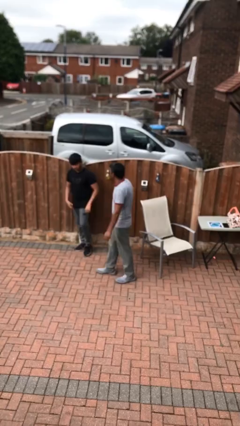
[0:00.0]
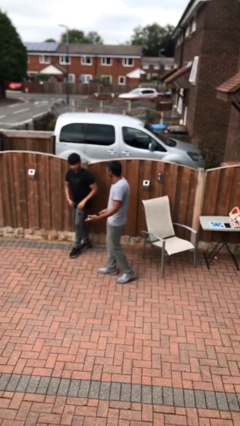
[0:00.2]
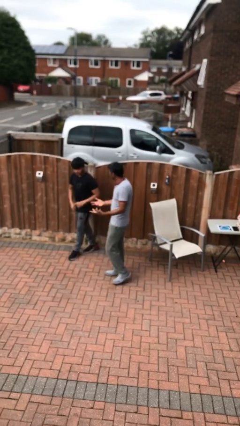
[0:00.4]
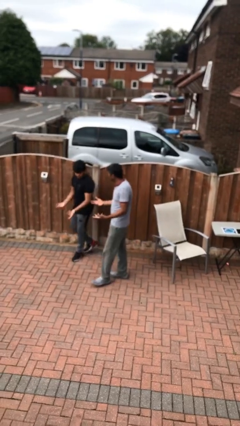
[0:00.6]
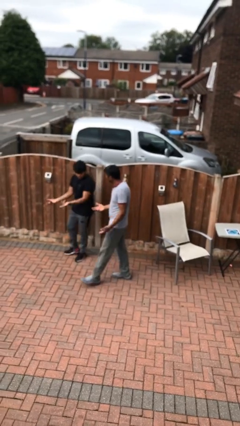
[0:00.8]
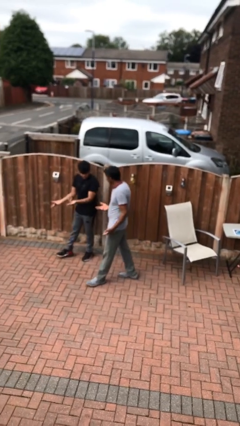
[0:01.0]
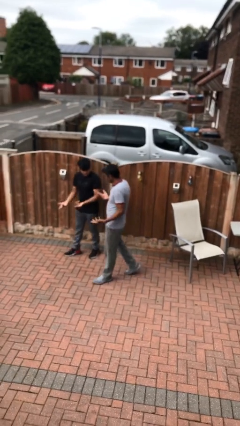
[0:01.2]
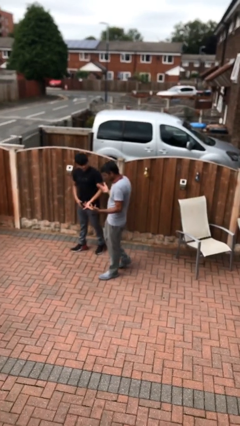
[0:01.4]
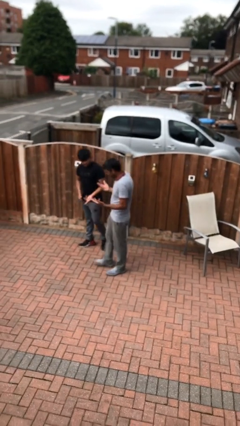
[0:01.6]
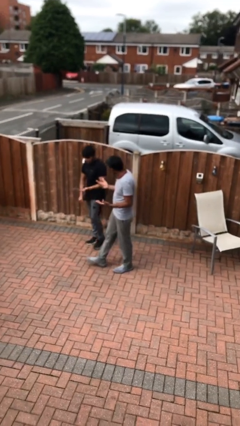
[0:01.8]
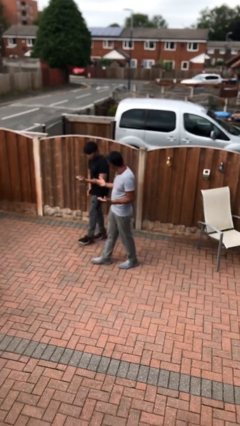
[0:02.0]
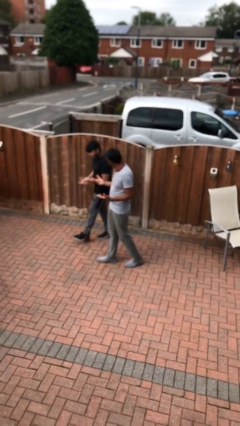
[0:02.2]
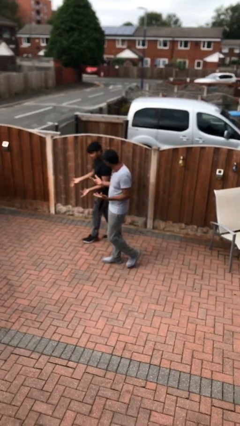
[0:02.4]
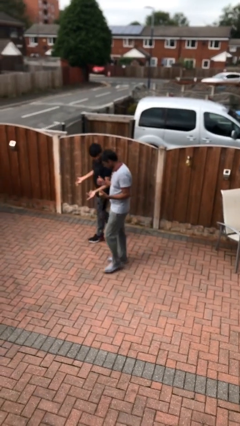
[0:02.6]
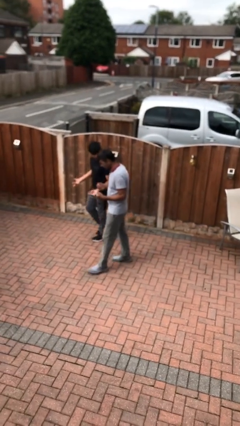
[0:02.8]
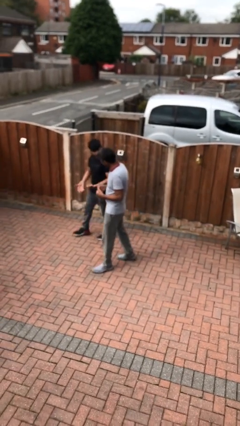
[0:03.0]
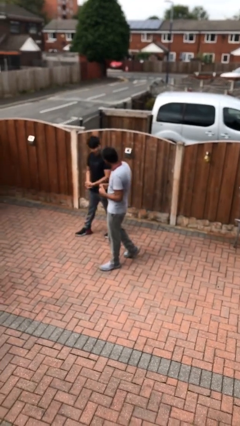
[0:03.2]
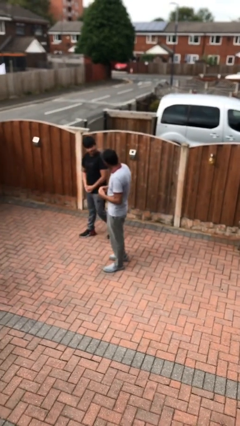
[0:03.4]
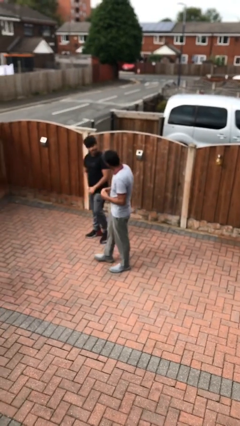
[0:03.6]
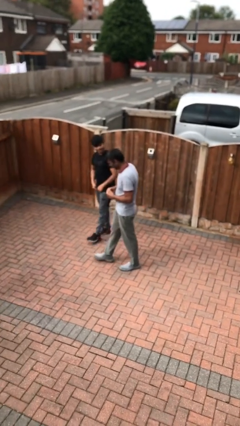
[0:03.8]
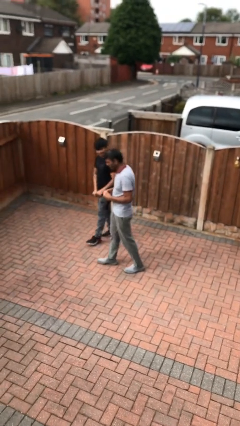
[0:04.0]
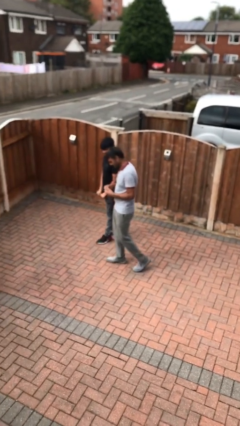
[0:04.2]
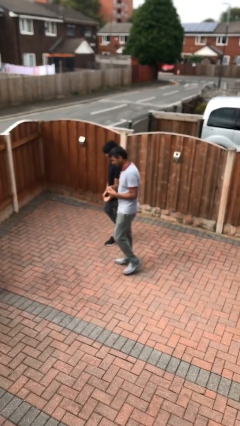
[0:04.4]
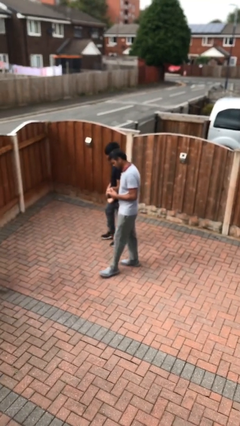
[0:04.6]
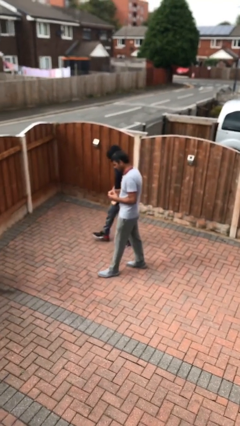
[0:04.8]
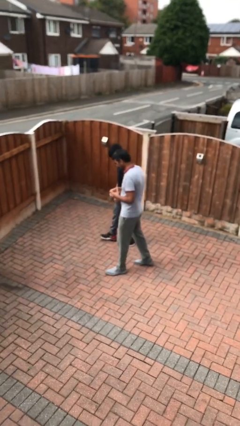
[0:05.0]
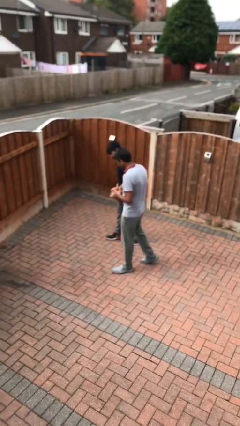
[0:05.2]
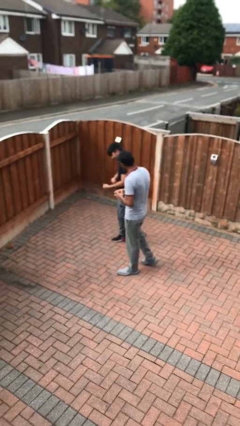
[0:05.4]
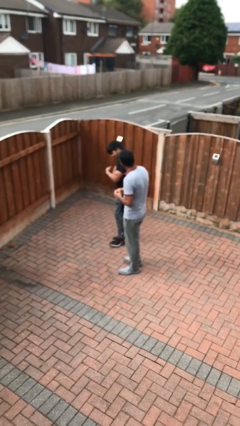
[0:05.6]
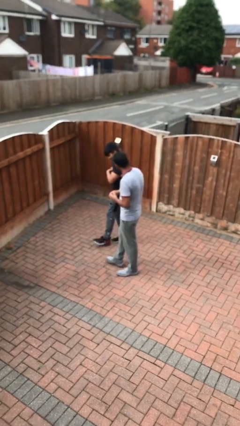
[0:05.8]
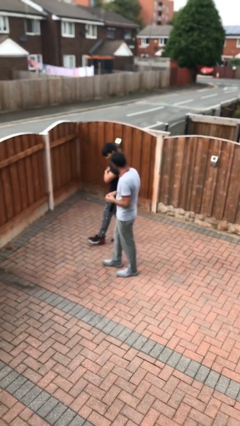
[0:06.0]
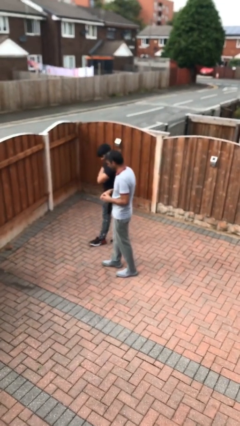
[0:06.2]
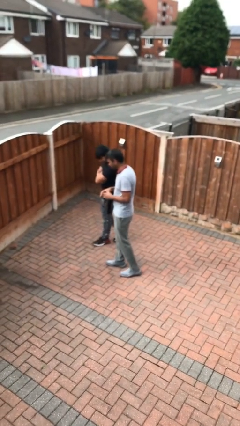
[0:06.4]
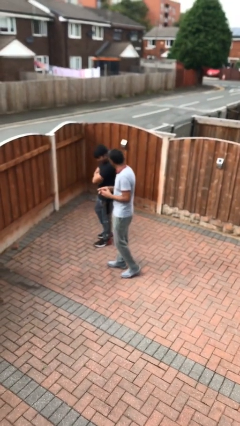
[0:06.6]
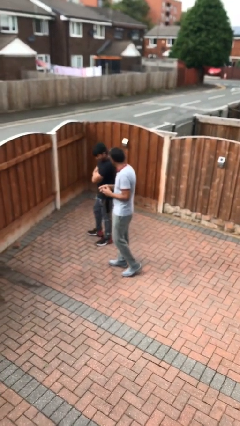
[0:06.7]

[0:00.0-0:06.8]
person talks to person

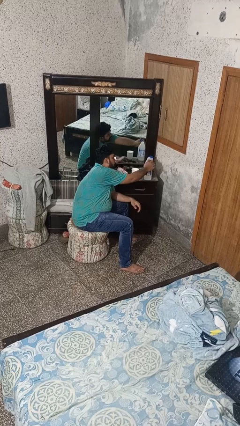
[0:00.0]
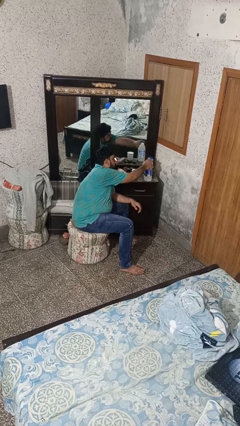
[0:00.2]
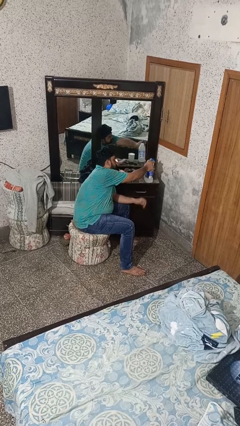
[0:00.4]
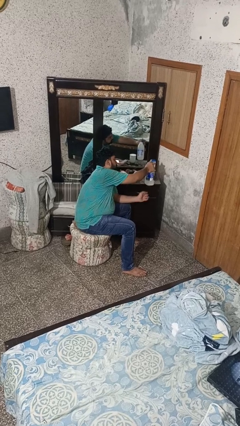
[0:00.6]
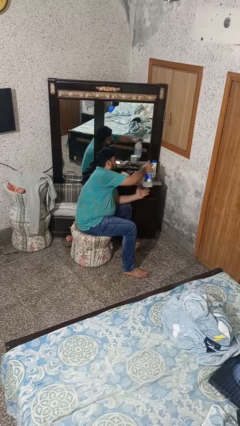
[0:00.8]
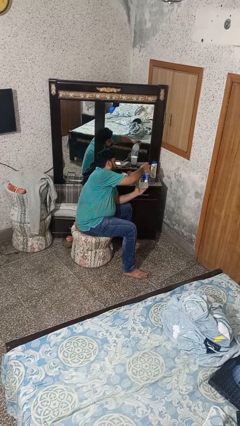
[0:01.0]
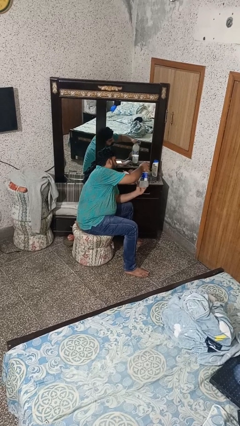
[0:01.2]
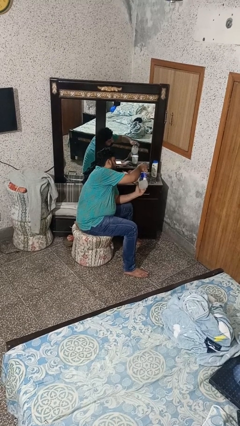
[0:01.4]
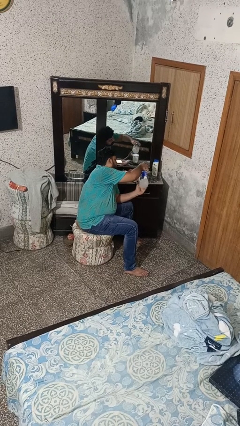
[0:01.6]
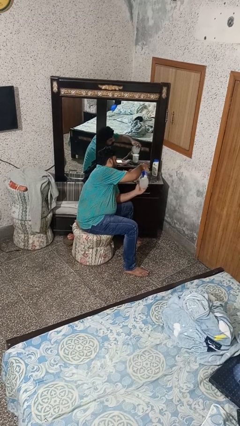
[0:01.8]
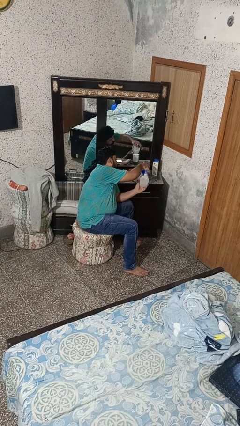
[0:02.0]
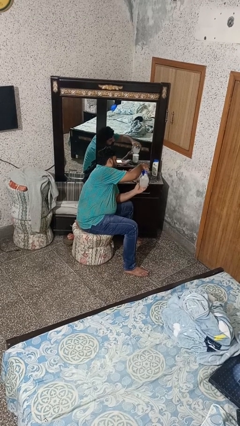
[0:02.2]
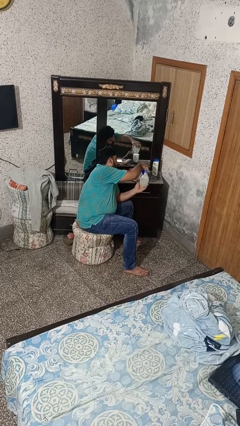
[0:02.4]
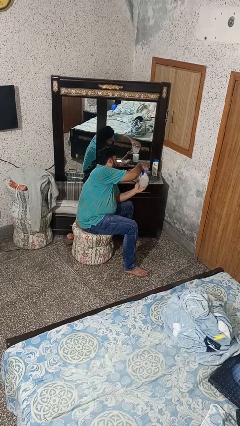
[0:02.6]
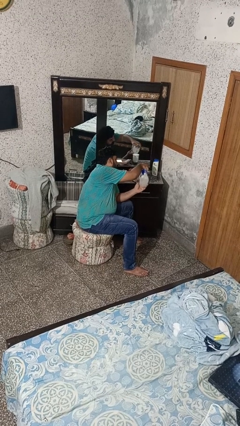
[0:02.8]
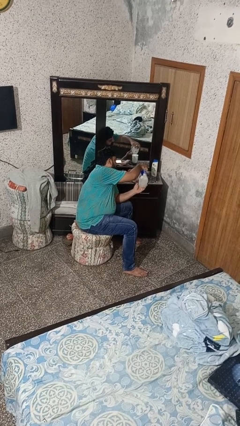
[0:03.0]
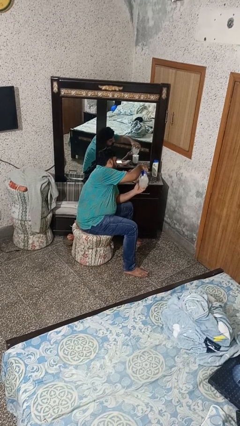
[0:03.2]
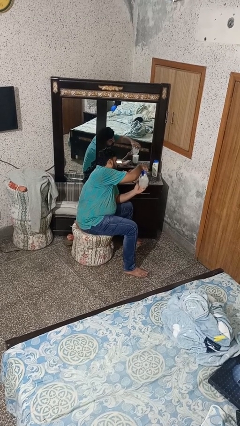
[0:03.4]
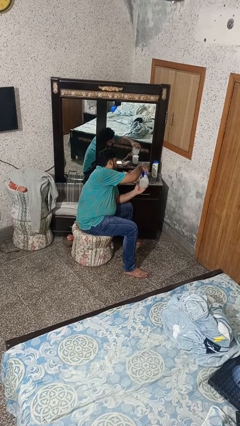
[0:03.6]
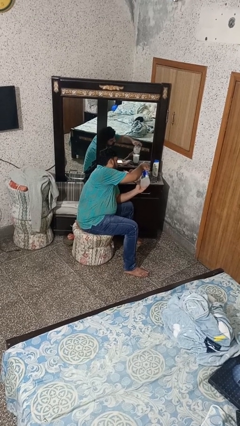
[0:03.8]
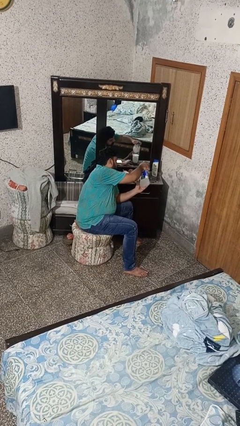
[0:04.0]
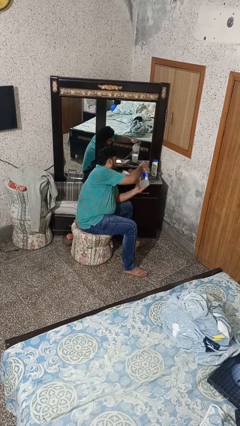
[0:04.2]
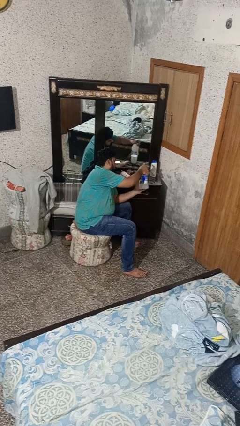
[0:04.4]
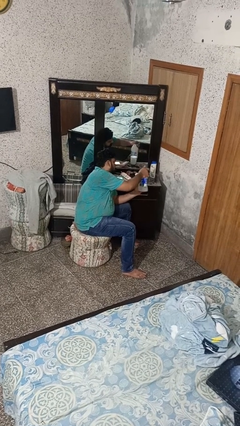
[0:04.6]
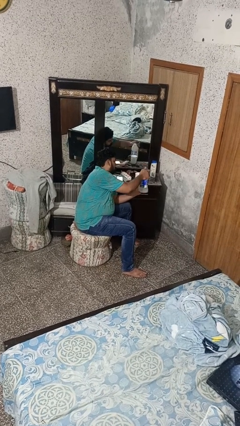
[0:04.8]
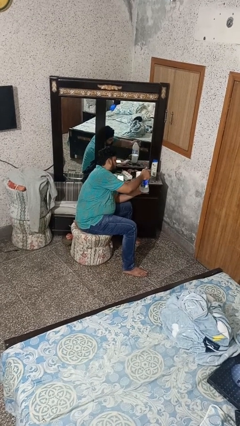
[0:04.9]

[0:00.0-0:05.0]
person pours liquid into cup

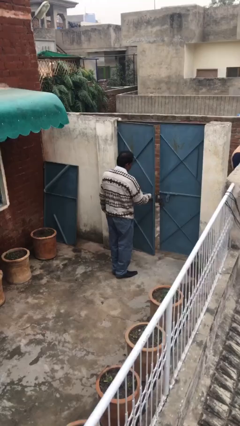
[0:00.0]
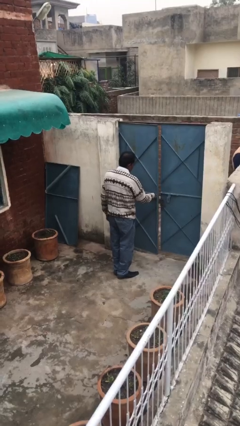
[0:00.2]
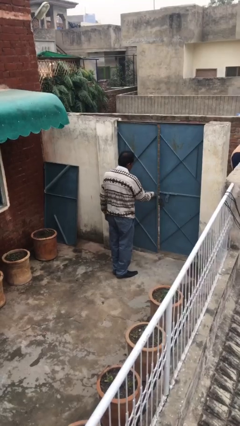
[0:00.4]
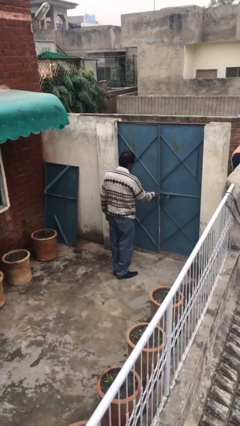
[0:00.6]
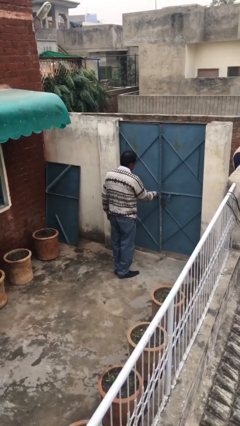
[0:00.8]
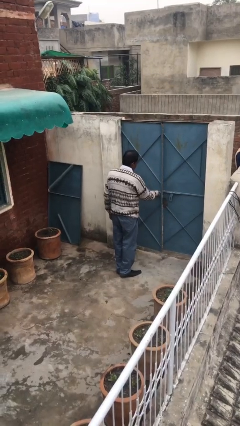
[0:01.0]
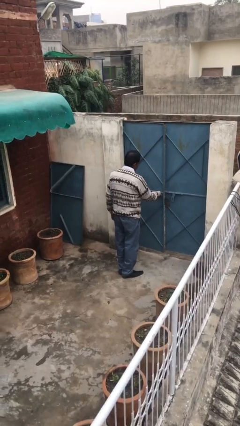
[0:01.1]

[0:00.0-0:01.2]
person closes facility door

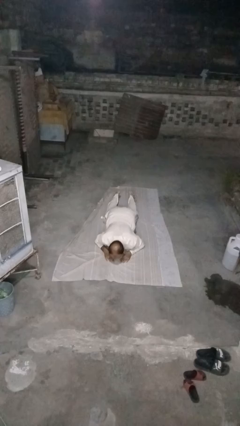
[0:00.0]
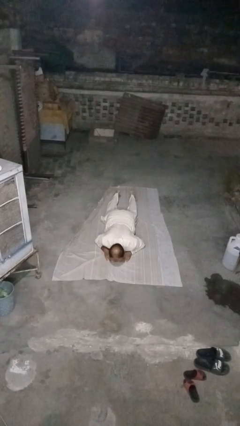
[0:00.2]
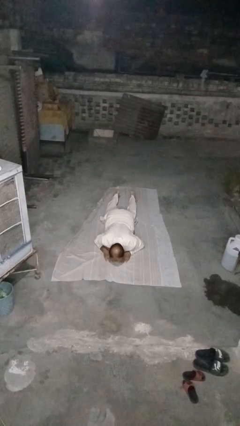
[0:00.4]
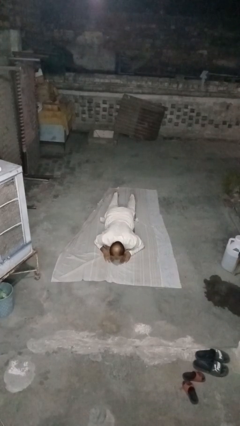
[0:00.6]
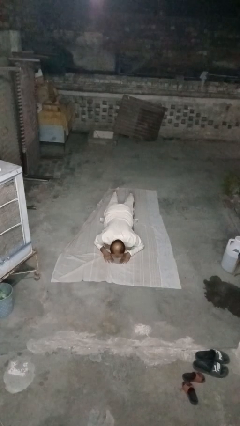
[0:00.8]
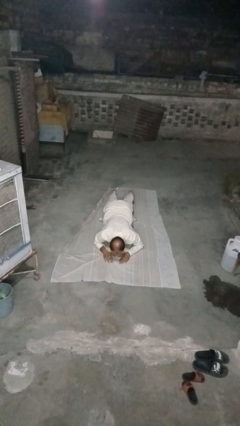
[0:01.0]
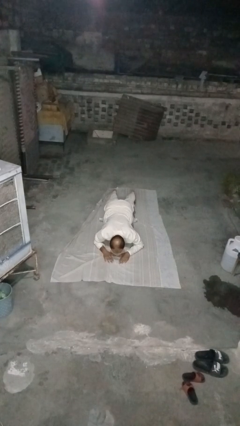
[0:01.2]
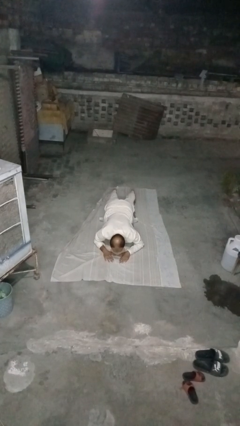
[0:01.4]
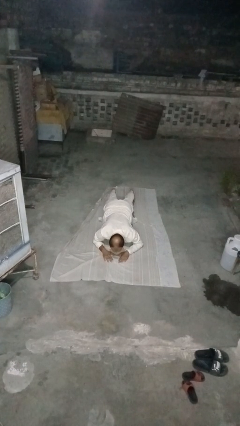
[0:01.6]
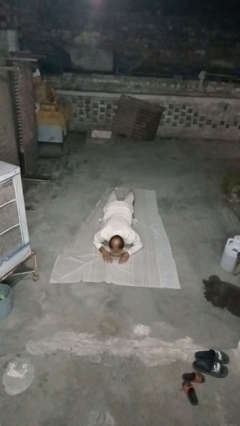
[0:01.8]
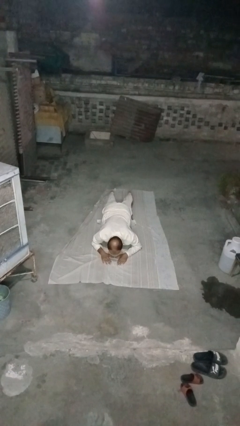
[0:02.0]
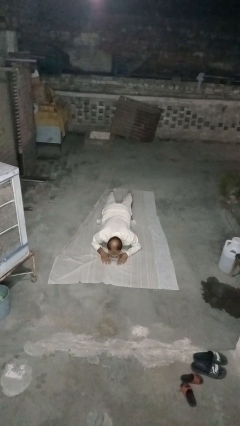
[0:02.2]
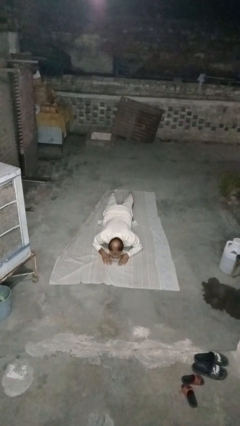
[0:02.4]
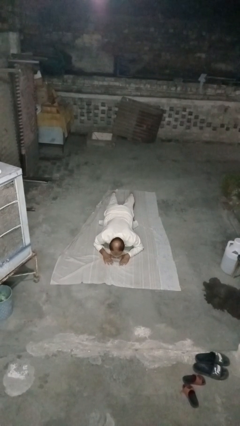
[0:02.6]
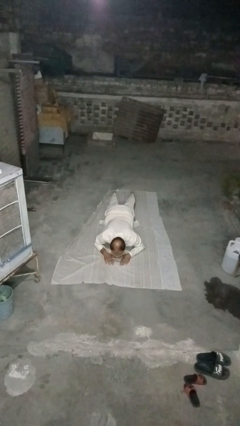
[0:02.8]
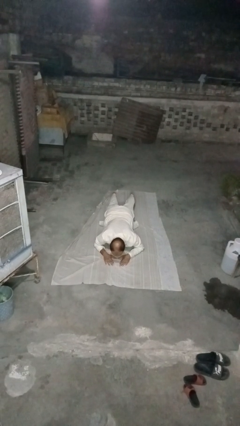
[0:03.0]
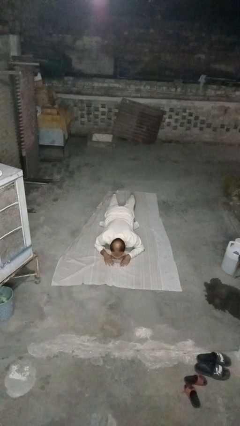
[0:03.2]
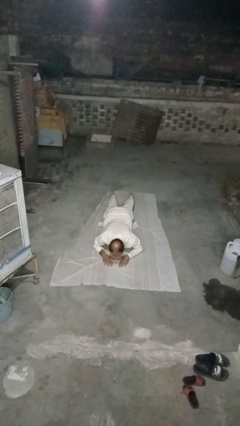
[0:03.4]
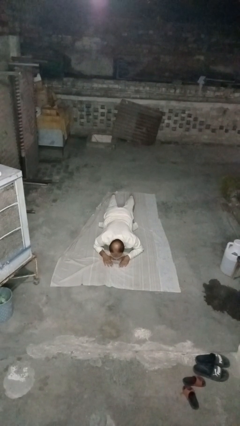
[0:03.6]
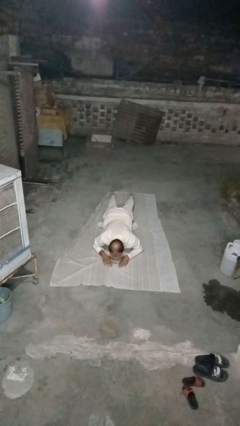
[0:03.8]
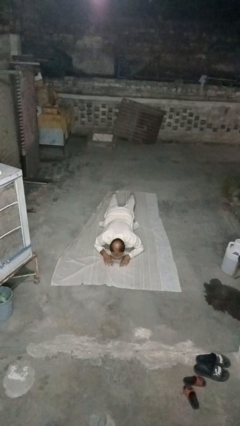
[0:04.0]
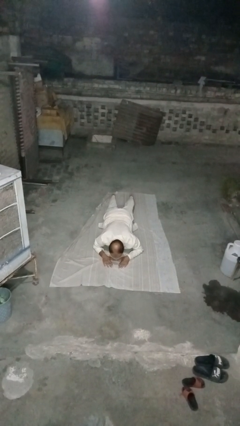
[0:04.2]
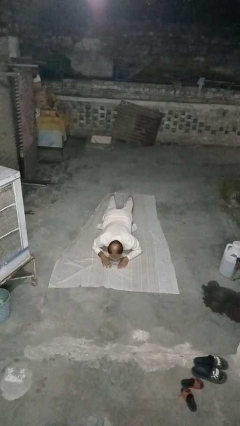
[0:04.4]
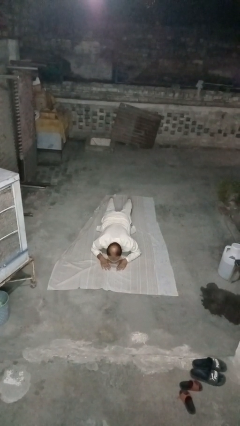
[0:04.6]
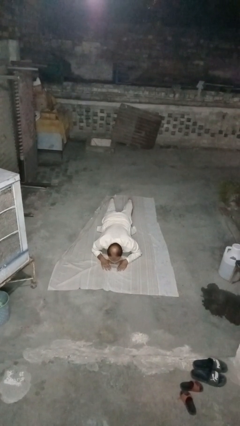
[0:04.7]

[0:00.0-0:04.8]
person exercises with plank
